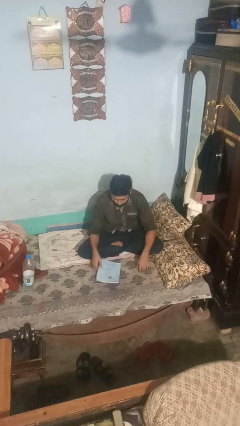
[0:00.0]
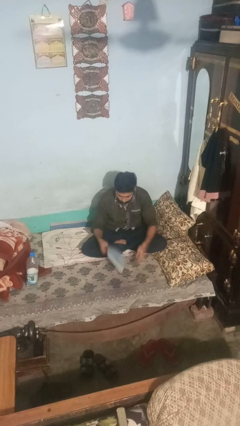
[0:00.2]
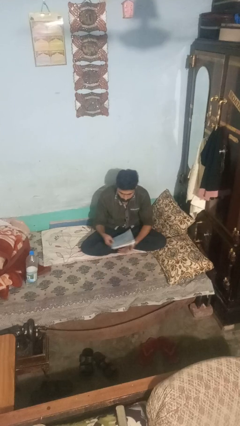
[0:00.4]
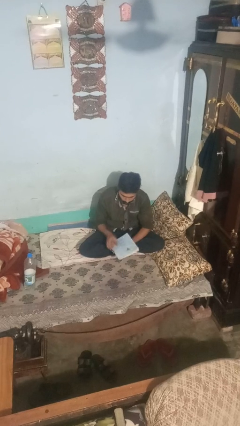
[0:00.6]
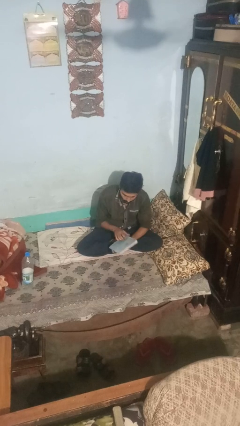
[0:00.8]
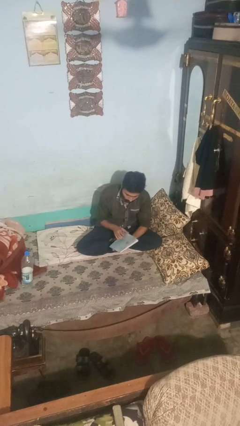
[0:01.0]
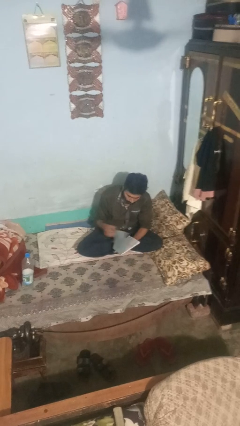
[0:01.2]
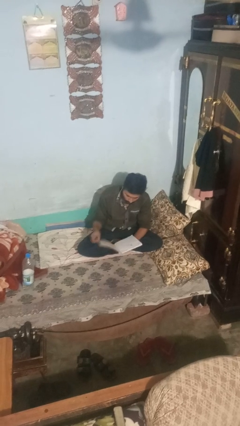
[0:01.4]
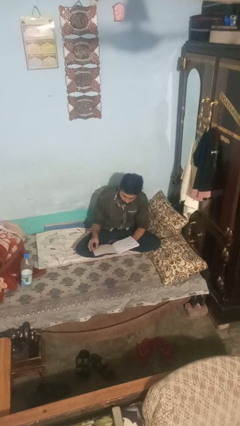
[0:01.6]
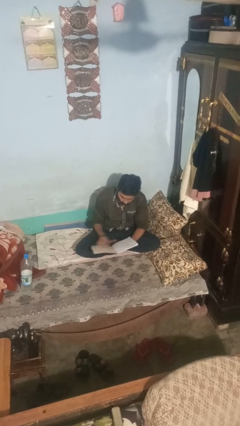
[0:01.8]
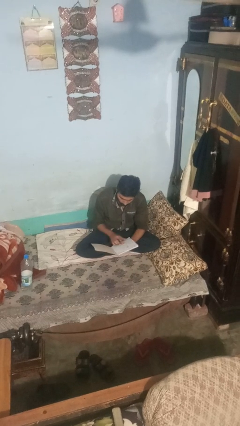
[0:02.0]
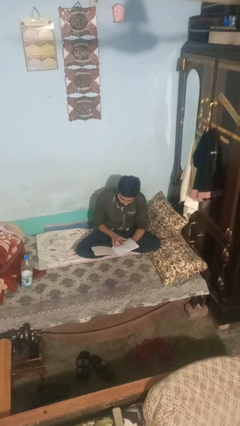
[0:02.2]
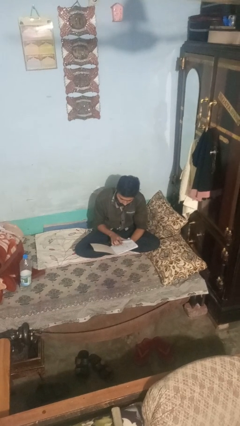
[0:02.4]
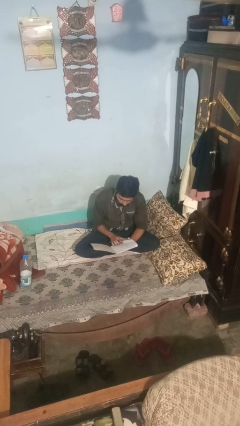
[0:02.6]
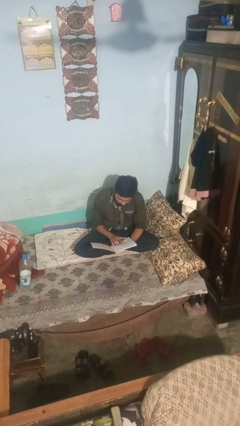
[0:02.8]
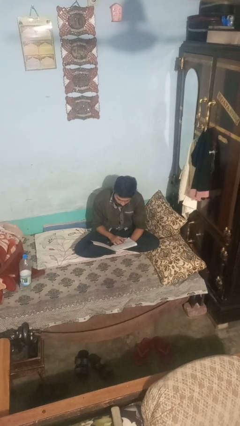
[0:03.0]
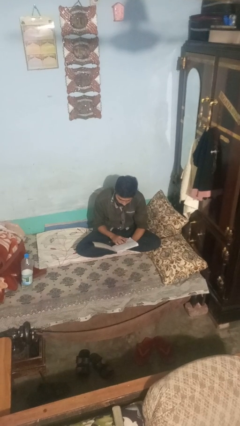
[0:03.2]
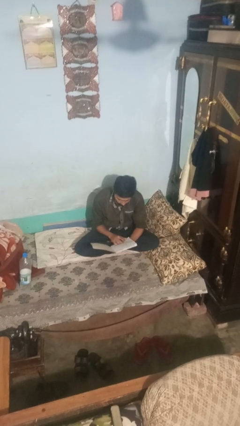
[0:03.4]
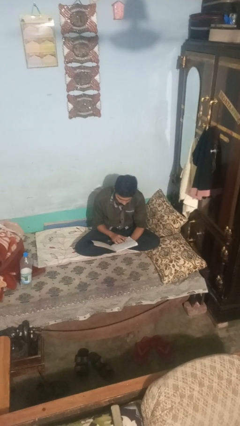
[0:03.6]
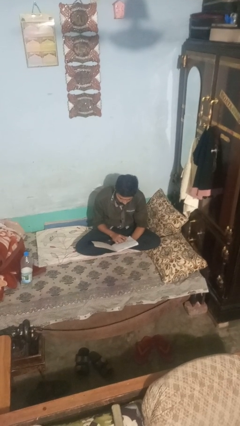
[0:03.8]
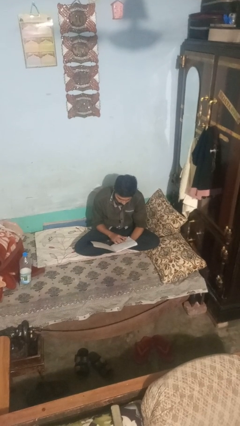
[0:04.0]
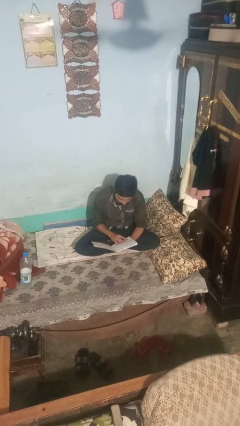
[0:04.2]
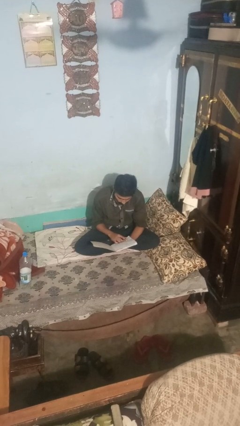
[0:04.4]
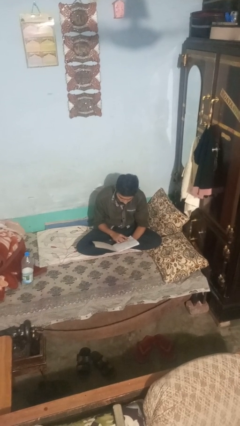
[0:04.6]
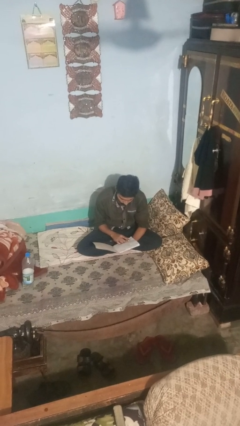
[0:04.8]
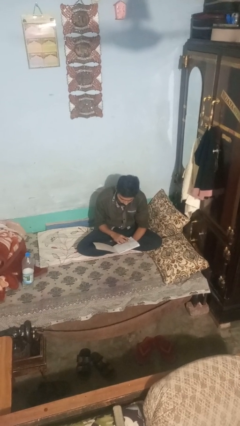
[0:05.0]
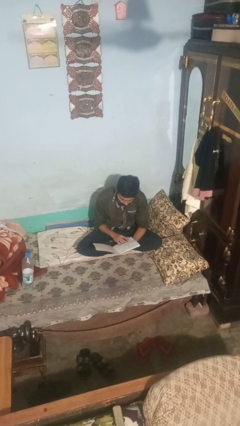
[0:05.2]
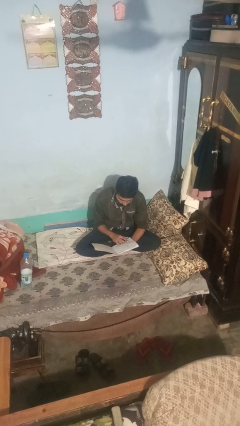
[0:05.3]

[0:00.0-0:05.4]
person reads book

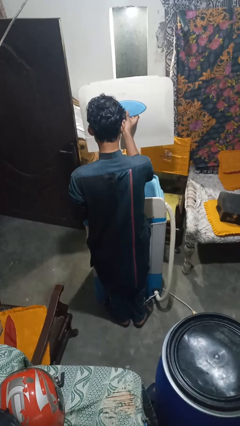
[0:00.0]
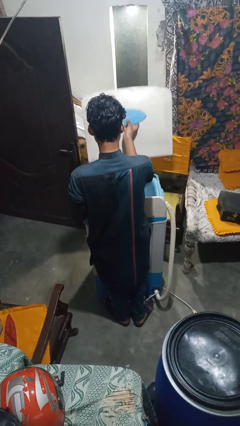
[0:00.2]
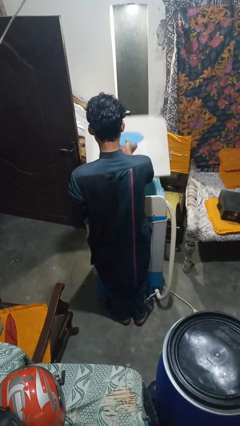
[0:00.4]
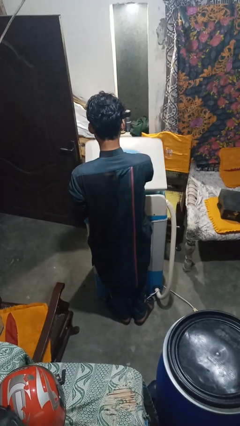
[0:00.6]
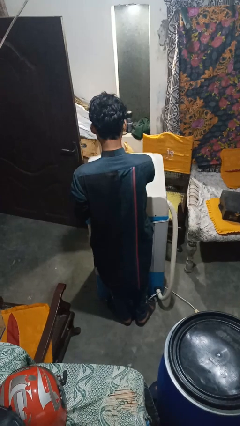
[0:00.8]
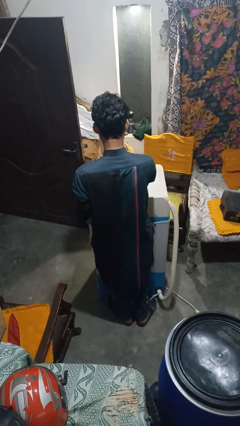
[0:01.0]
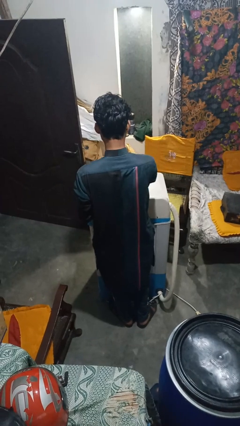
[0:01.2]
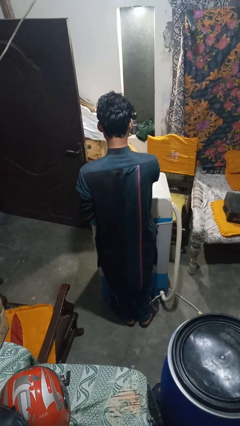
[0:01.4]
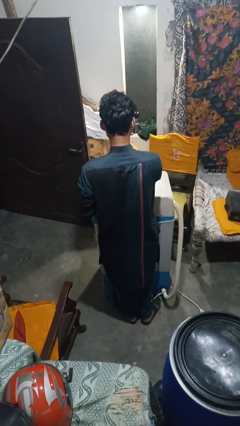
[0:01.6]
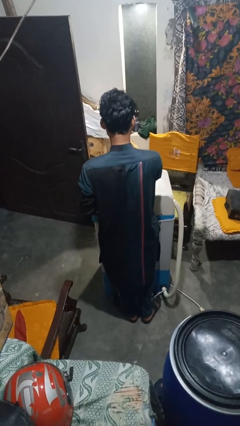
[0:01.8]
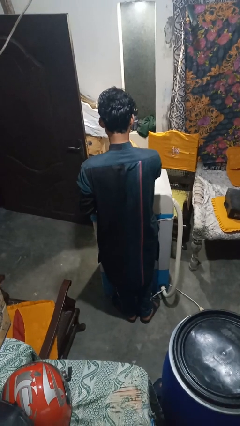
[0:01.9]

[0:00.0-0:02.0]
person closes clothes washer

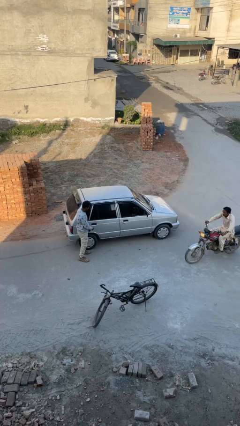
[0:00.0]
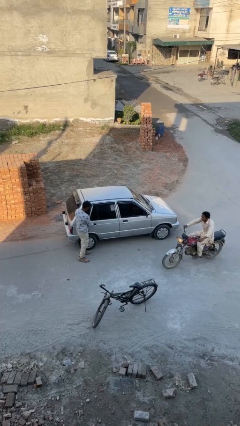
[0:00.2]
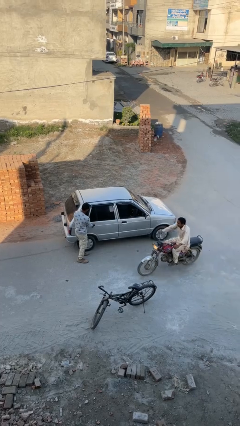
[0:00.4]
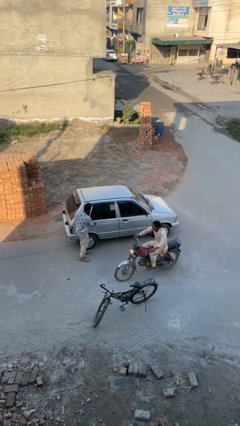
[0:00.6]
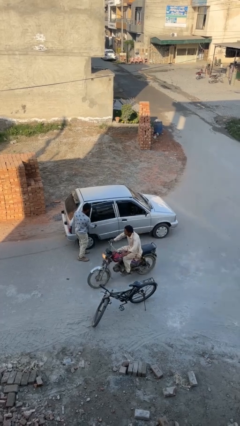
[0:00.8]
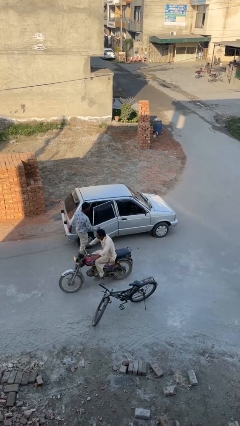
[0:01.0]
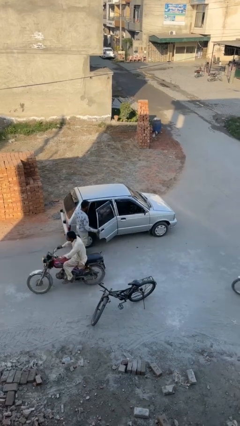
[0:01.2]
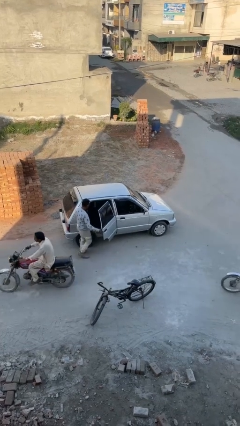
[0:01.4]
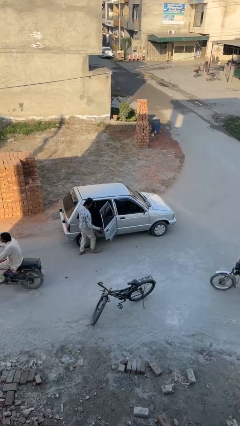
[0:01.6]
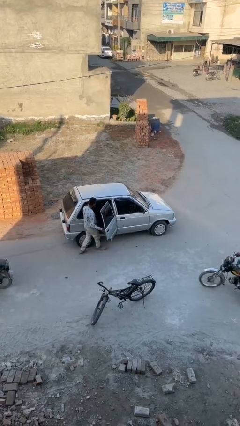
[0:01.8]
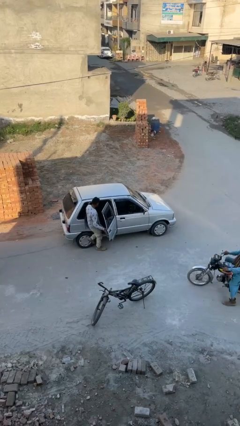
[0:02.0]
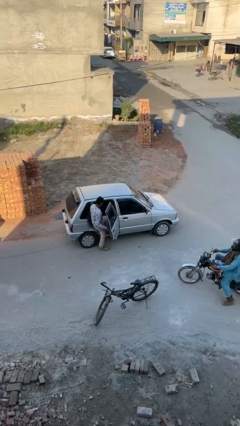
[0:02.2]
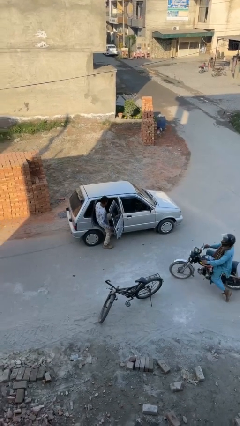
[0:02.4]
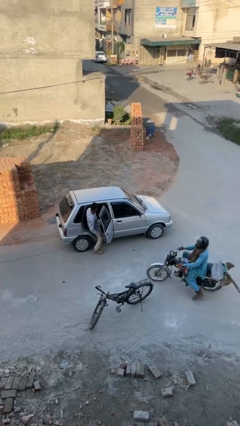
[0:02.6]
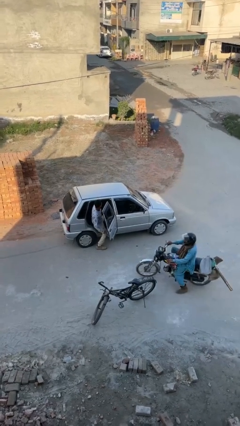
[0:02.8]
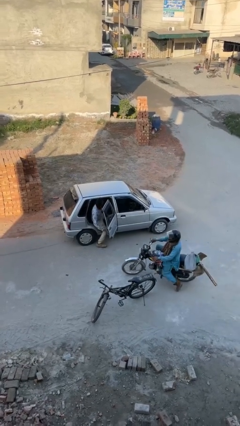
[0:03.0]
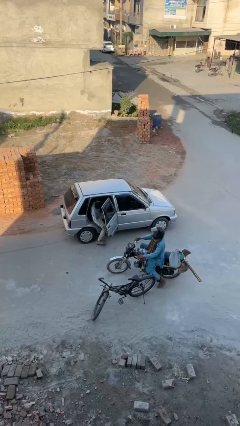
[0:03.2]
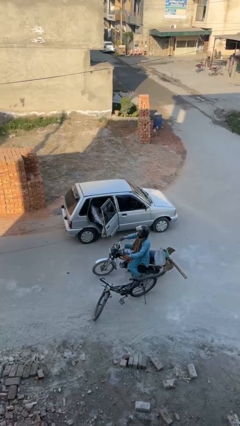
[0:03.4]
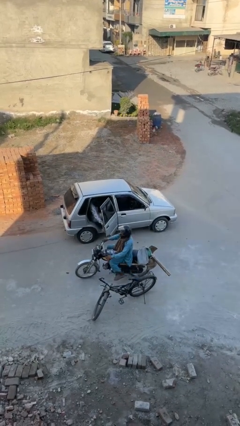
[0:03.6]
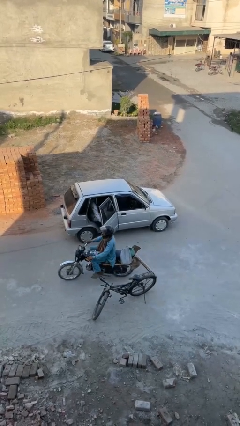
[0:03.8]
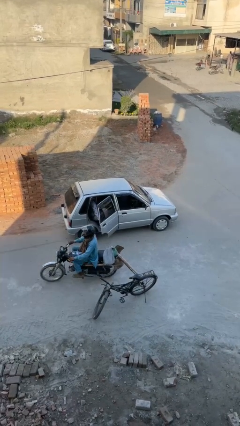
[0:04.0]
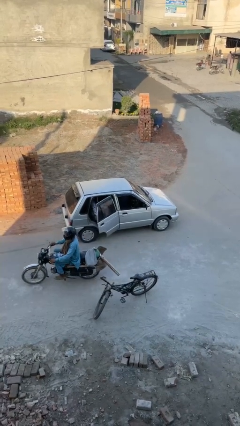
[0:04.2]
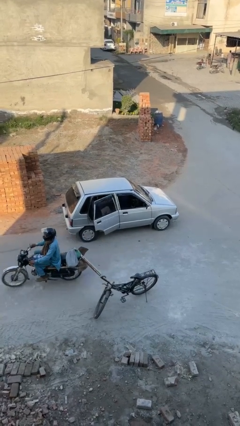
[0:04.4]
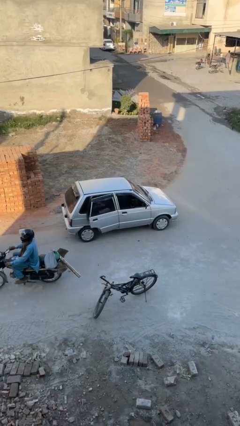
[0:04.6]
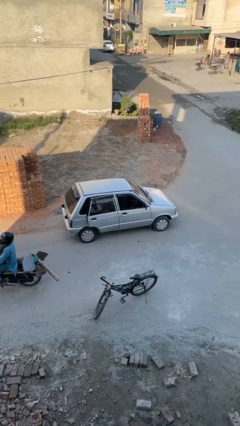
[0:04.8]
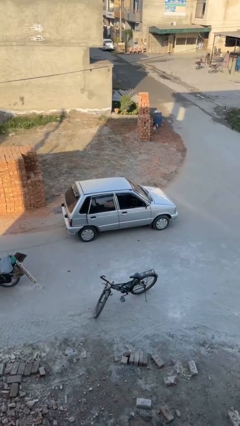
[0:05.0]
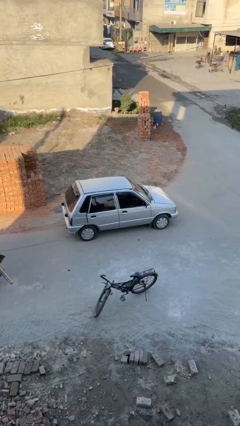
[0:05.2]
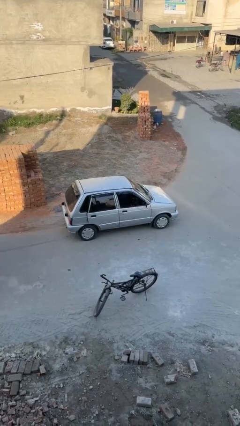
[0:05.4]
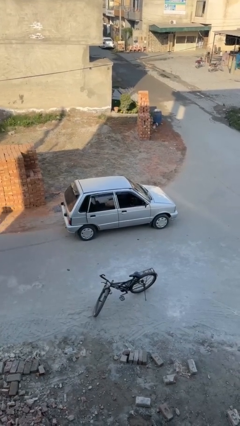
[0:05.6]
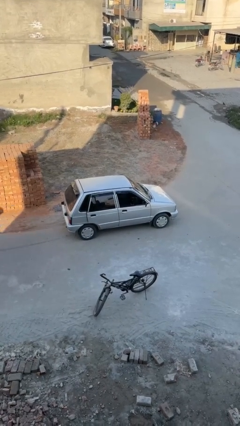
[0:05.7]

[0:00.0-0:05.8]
car picks up person

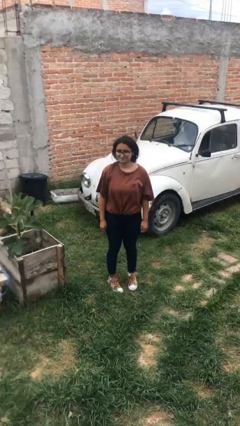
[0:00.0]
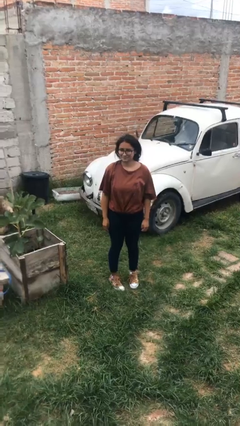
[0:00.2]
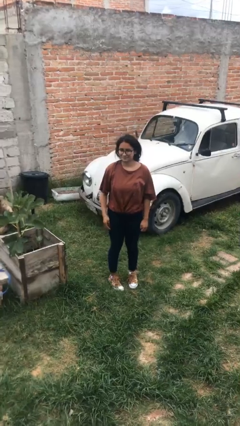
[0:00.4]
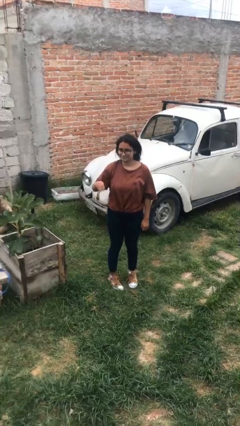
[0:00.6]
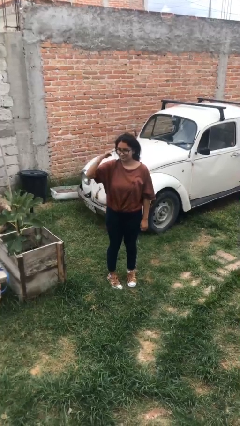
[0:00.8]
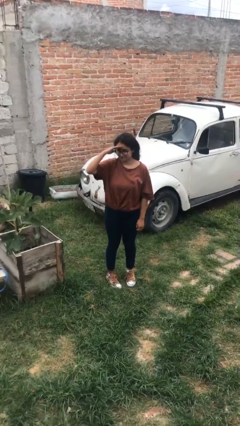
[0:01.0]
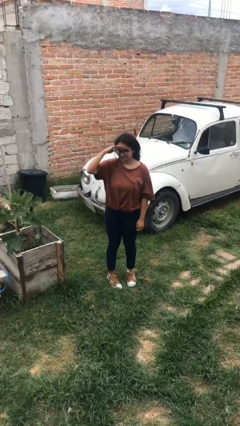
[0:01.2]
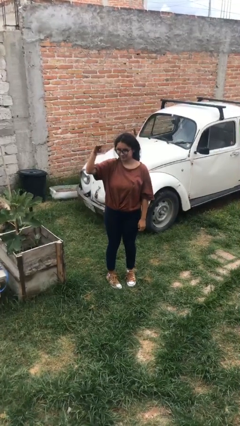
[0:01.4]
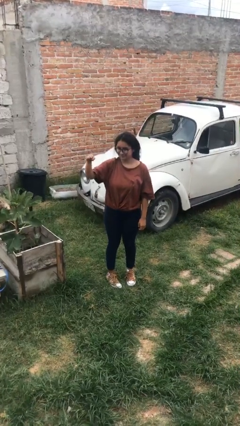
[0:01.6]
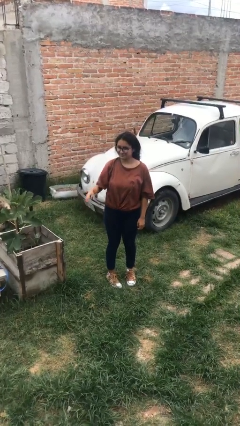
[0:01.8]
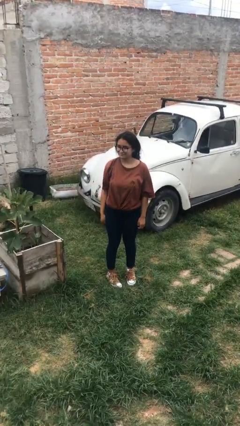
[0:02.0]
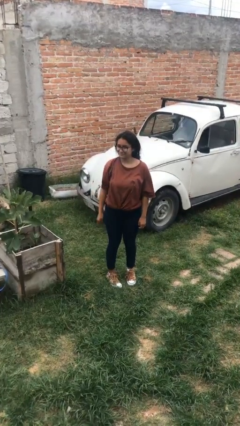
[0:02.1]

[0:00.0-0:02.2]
person salutes

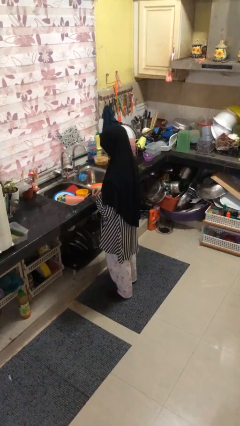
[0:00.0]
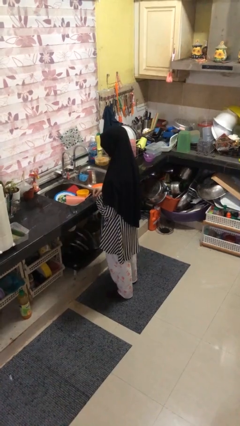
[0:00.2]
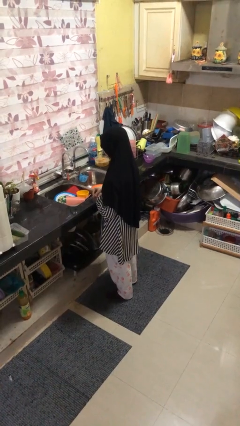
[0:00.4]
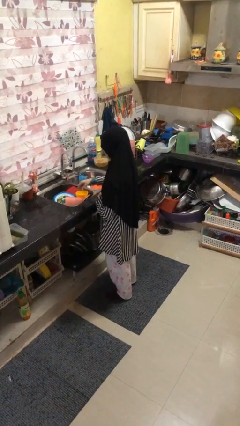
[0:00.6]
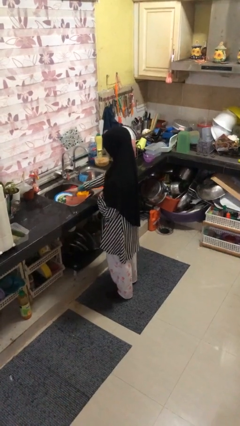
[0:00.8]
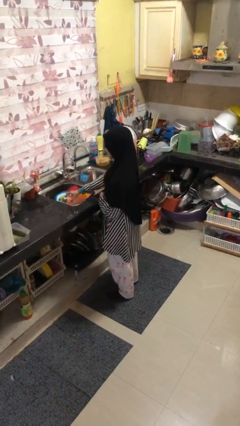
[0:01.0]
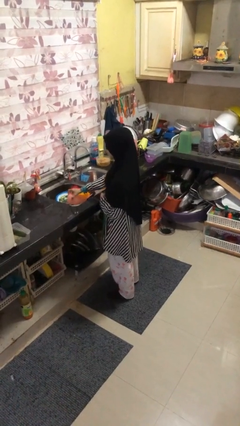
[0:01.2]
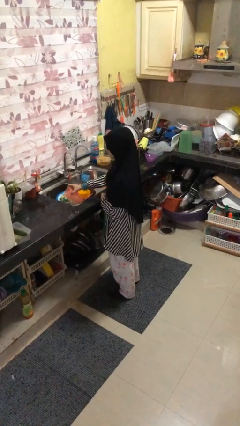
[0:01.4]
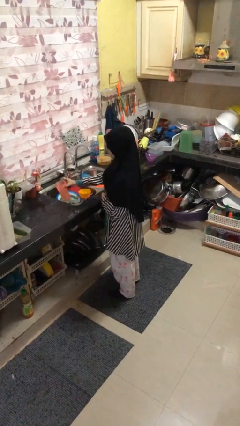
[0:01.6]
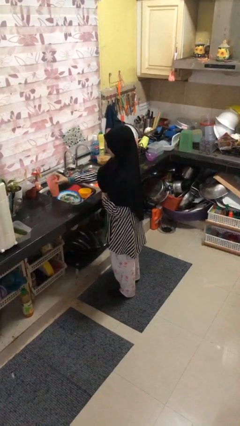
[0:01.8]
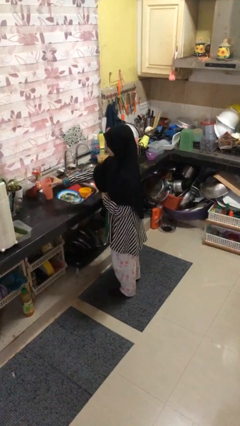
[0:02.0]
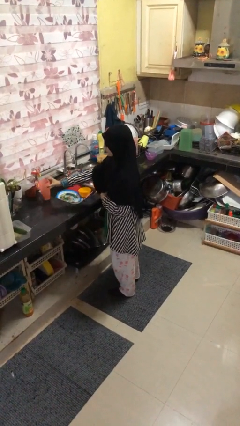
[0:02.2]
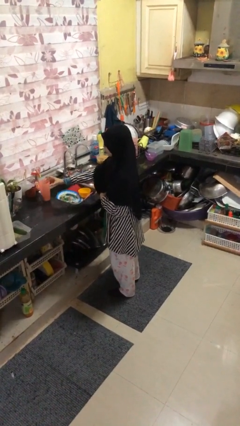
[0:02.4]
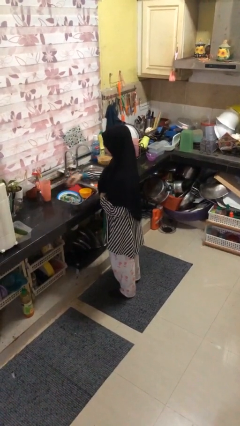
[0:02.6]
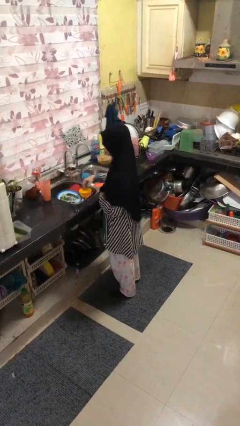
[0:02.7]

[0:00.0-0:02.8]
person unloads dishwasher
